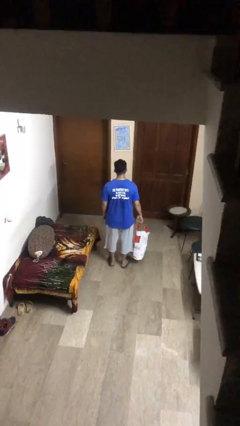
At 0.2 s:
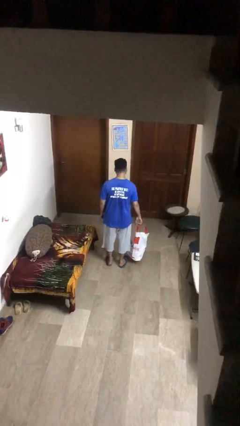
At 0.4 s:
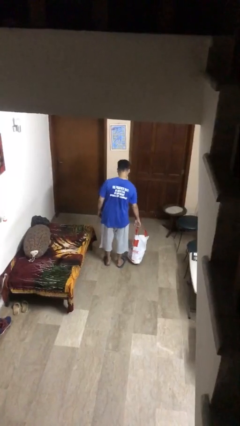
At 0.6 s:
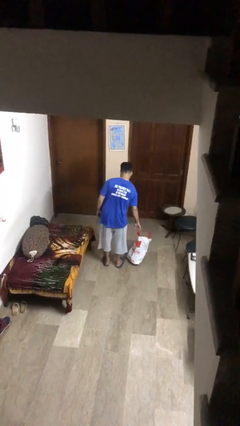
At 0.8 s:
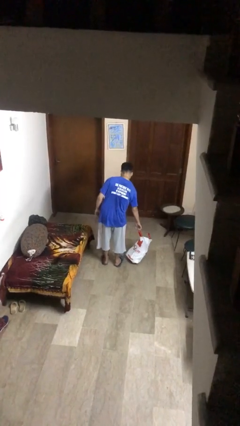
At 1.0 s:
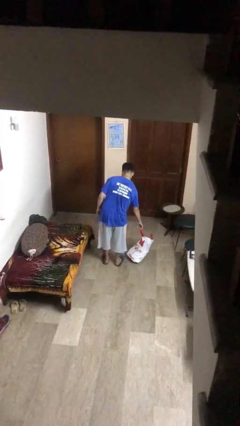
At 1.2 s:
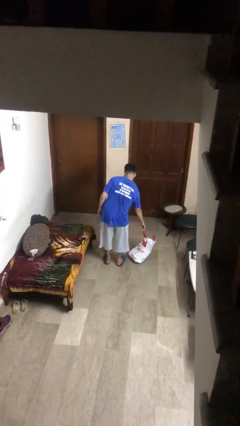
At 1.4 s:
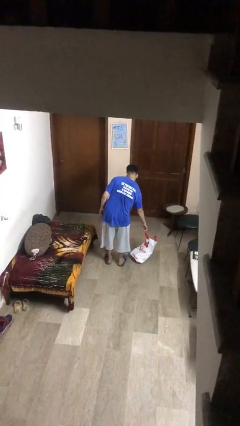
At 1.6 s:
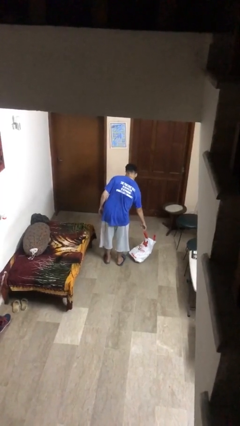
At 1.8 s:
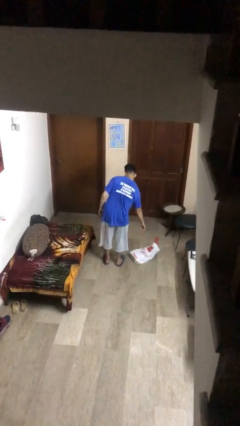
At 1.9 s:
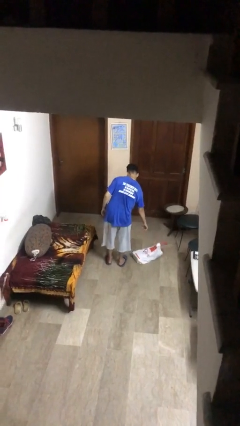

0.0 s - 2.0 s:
person puts down object on floor

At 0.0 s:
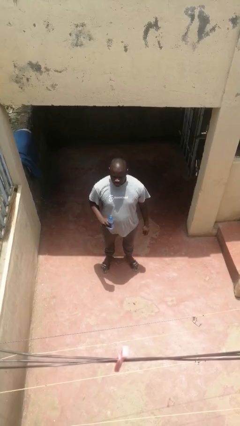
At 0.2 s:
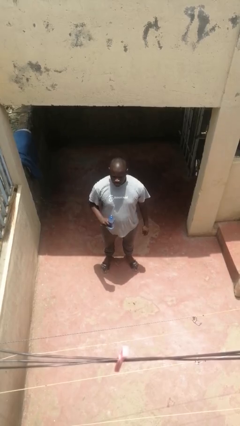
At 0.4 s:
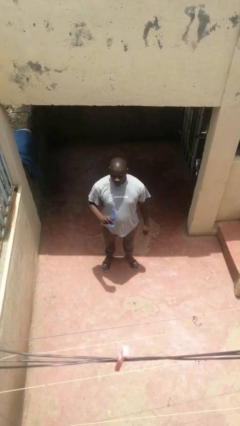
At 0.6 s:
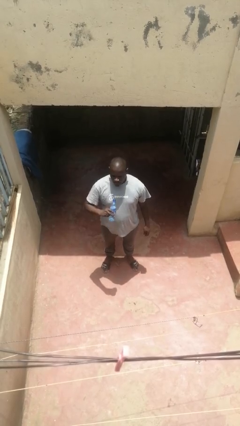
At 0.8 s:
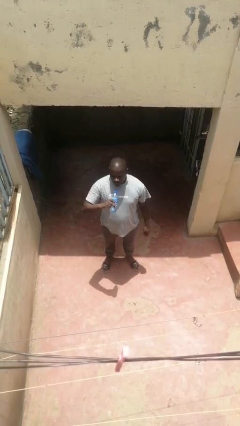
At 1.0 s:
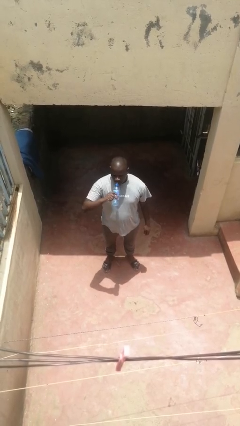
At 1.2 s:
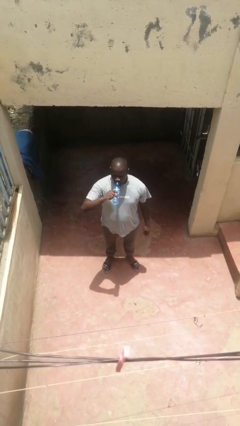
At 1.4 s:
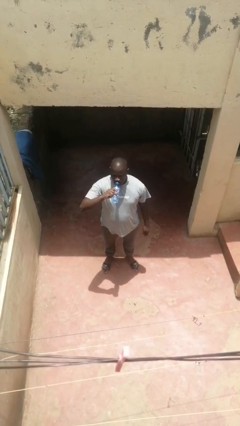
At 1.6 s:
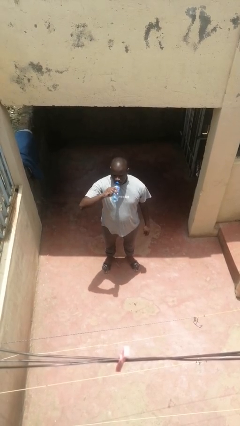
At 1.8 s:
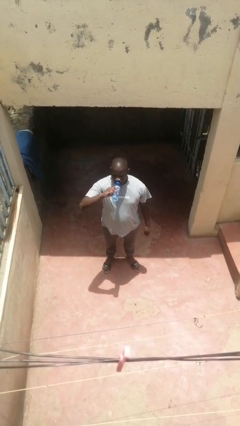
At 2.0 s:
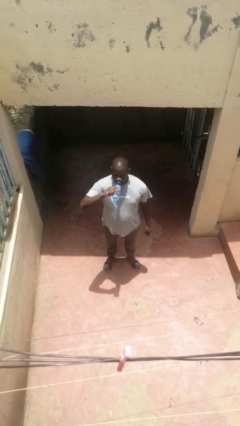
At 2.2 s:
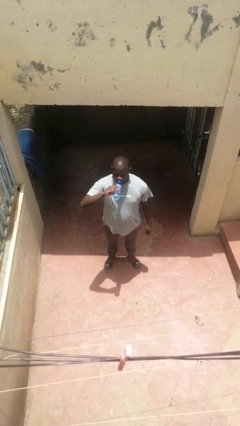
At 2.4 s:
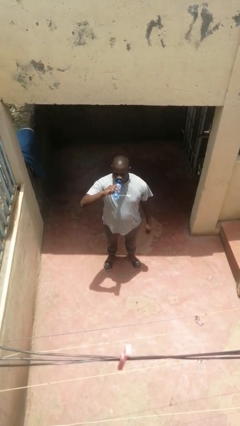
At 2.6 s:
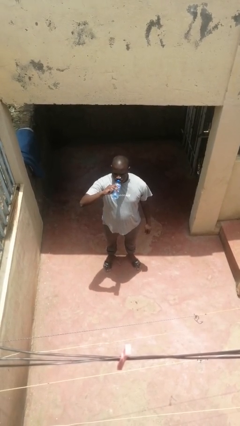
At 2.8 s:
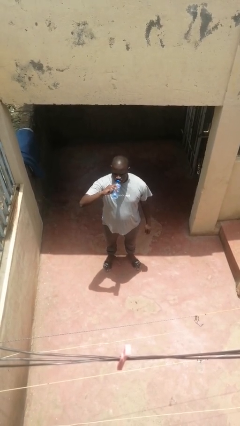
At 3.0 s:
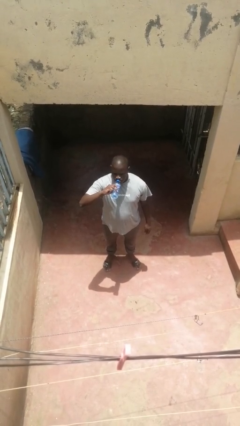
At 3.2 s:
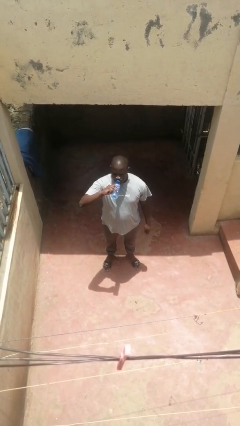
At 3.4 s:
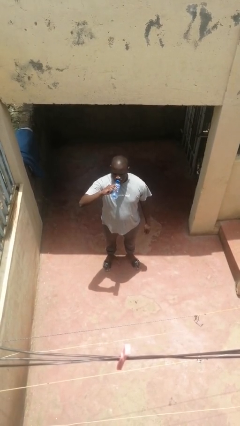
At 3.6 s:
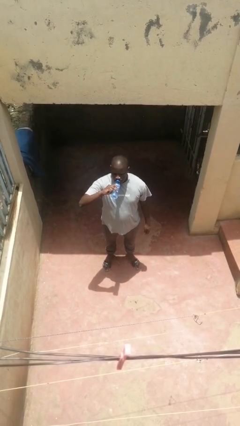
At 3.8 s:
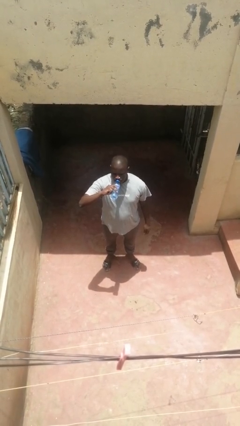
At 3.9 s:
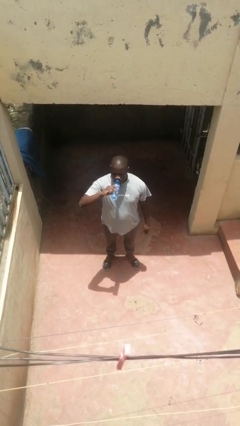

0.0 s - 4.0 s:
person drinks from bottle

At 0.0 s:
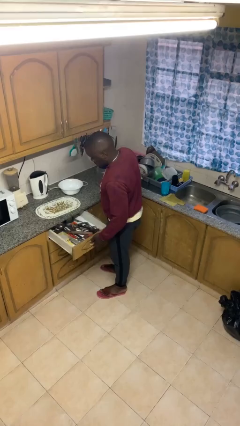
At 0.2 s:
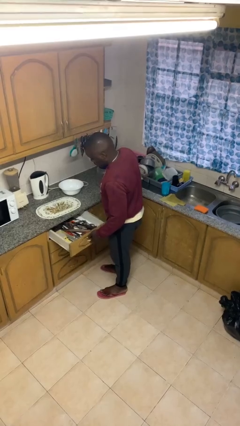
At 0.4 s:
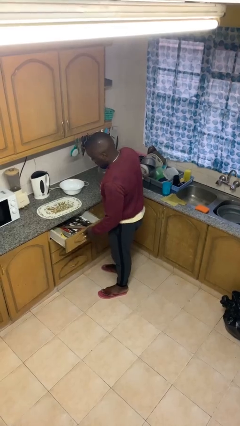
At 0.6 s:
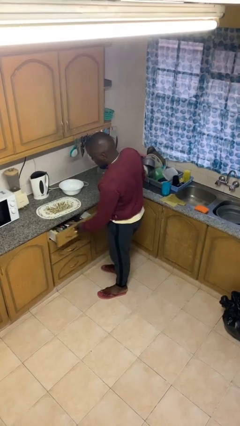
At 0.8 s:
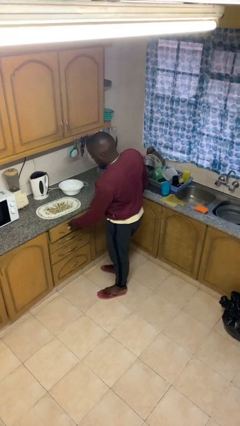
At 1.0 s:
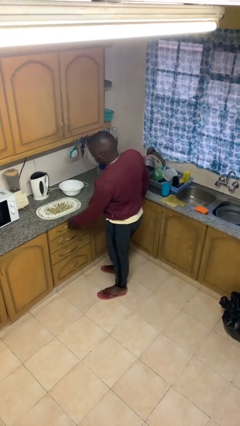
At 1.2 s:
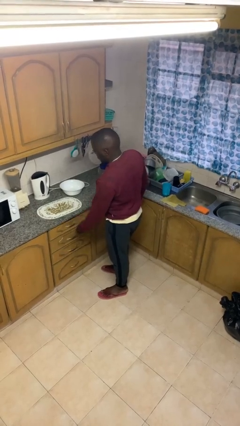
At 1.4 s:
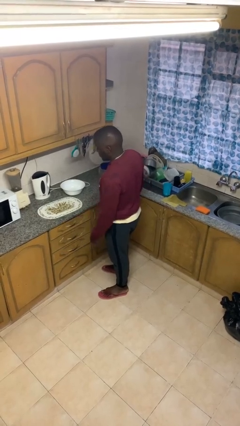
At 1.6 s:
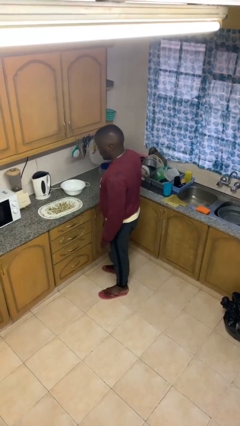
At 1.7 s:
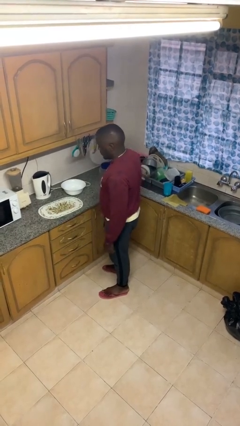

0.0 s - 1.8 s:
person closes kitchen drawer

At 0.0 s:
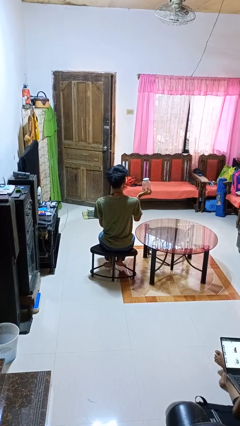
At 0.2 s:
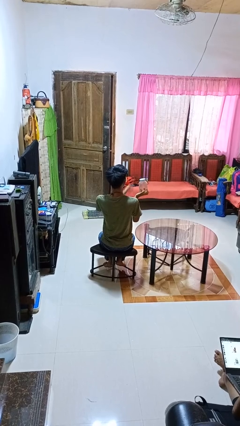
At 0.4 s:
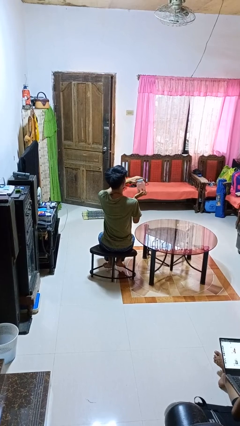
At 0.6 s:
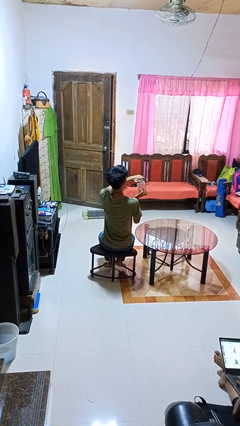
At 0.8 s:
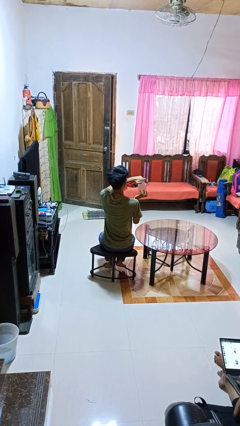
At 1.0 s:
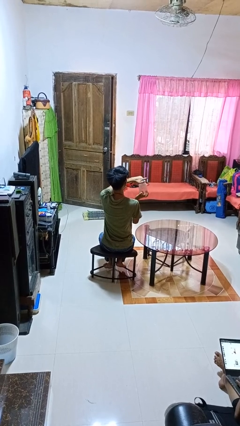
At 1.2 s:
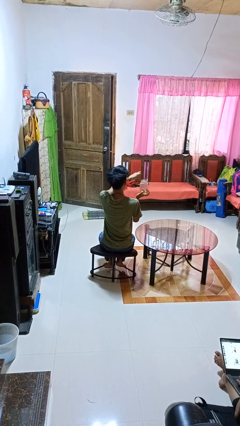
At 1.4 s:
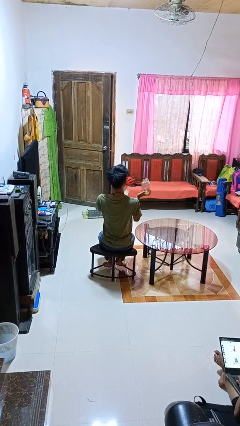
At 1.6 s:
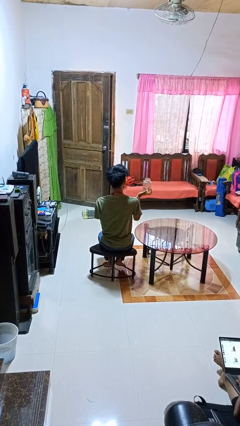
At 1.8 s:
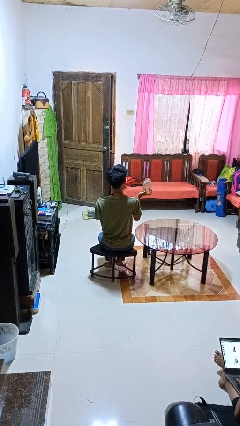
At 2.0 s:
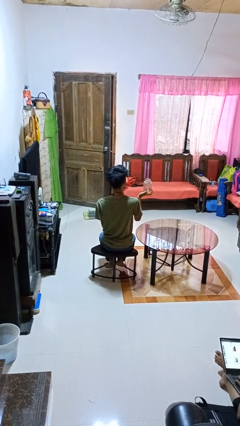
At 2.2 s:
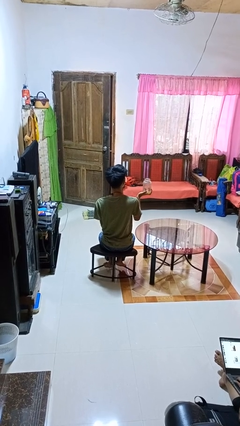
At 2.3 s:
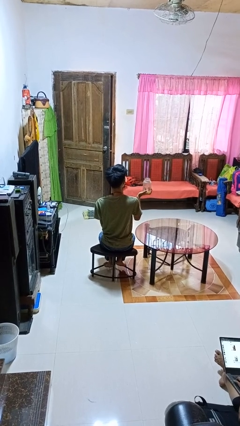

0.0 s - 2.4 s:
person opens jar

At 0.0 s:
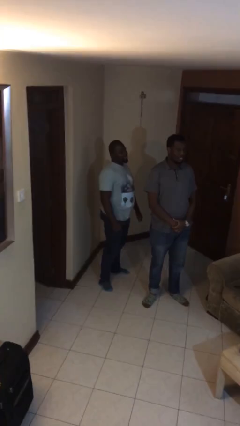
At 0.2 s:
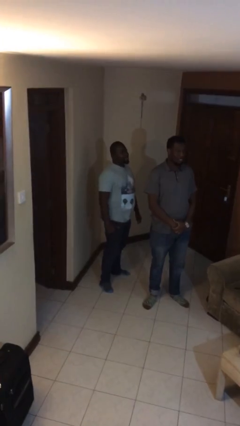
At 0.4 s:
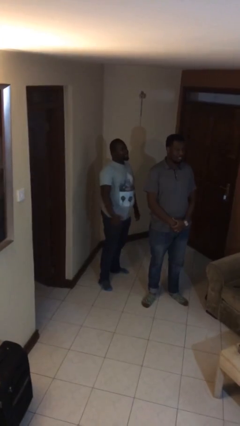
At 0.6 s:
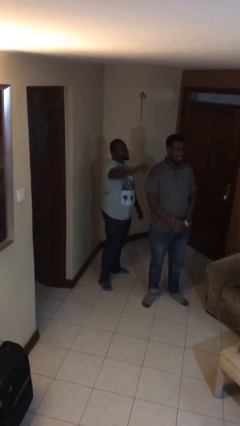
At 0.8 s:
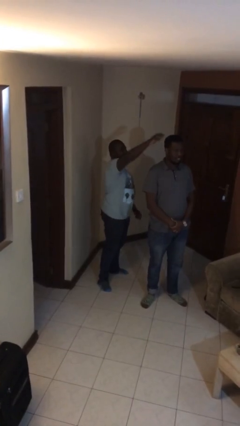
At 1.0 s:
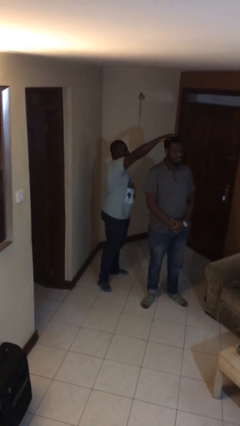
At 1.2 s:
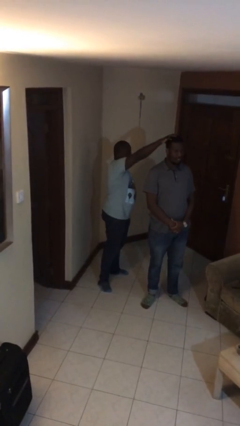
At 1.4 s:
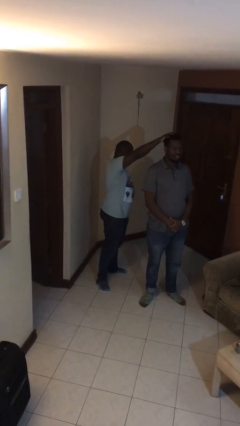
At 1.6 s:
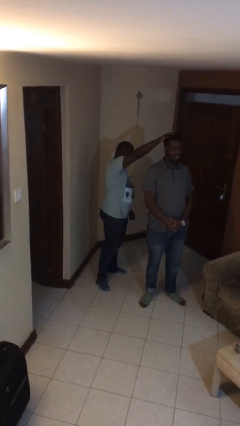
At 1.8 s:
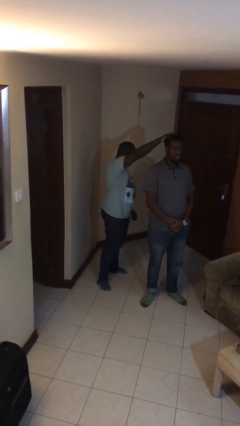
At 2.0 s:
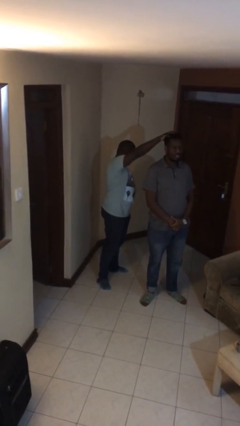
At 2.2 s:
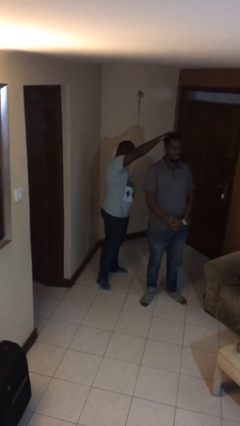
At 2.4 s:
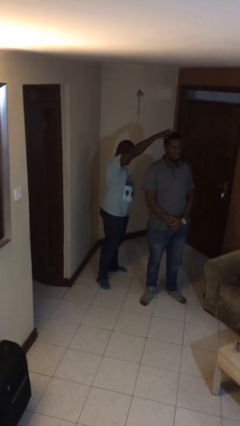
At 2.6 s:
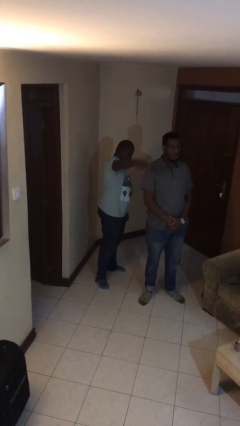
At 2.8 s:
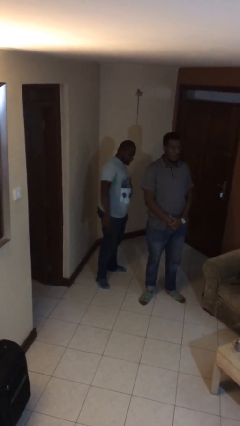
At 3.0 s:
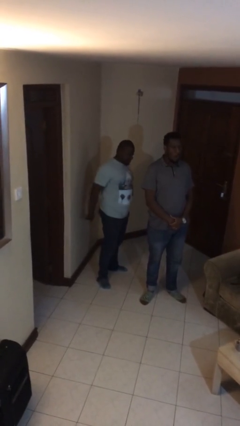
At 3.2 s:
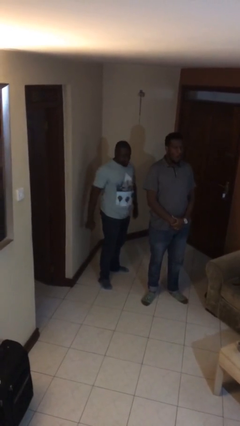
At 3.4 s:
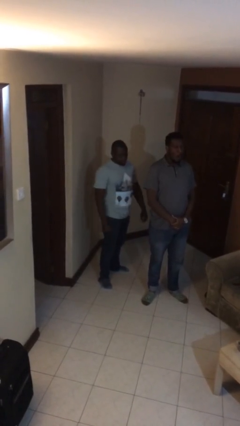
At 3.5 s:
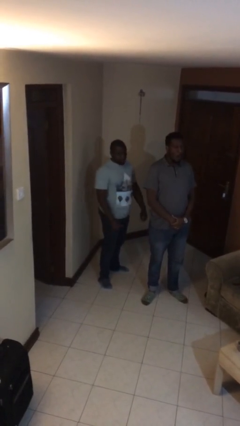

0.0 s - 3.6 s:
person grabs person by hair

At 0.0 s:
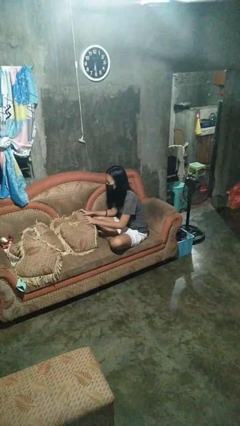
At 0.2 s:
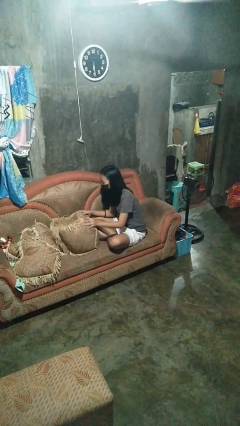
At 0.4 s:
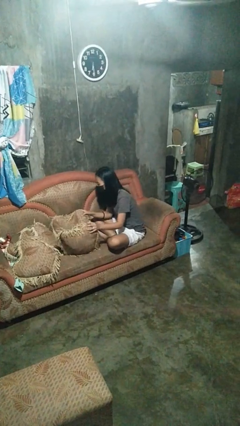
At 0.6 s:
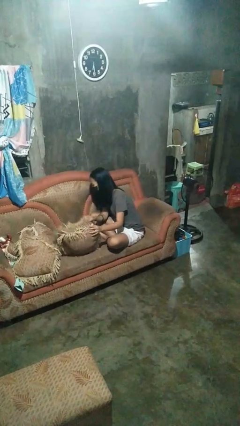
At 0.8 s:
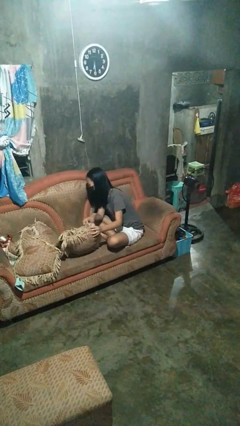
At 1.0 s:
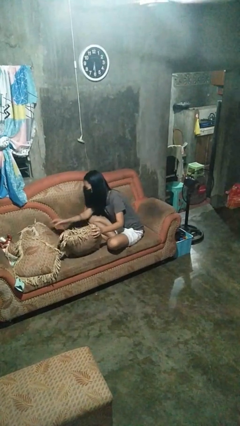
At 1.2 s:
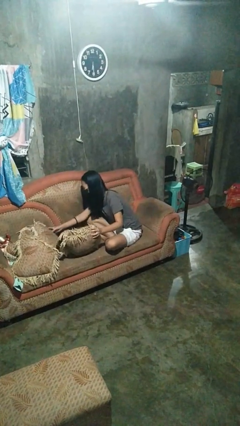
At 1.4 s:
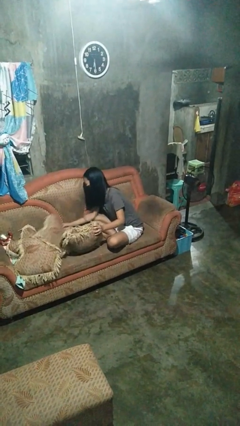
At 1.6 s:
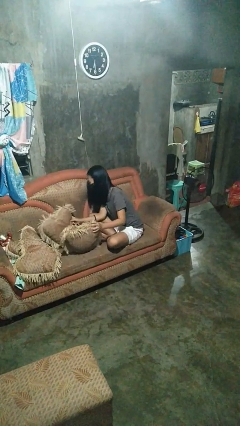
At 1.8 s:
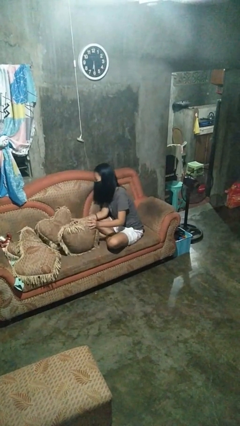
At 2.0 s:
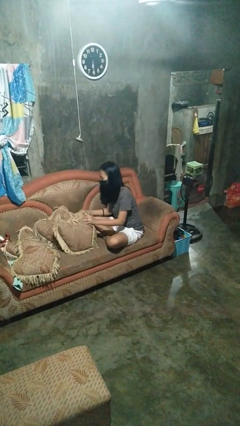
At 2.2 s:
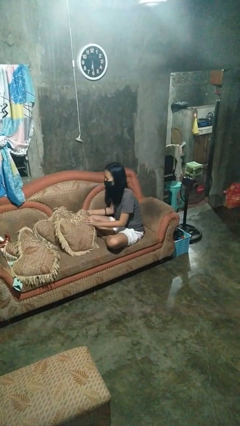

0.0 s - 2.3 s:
person searches in couch

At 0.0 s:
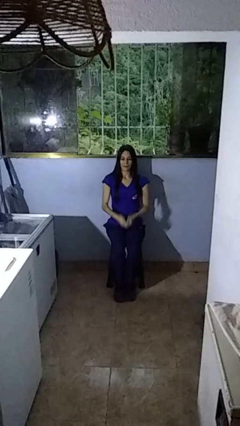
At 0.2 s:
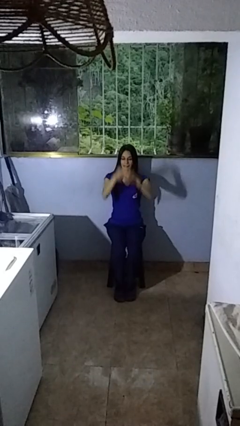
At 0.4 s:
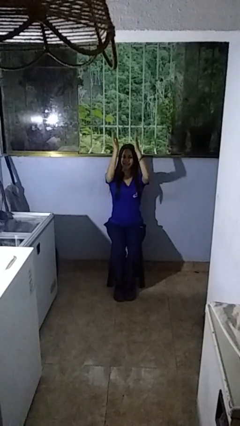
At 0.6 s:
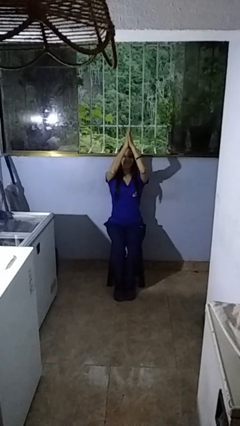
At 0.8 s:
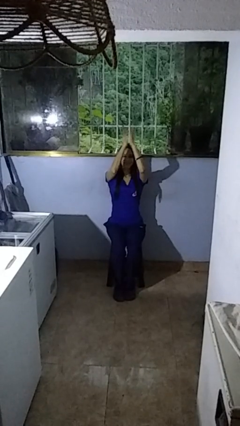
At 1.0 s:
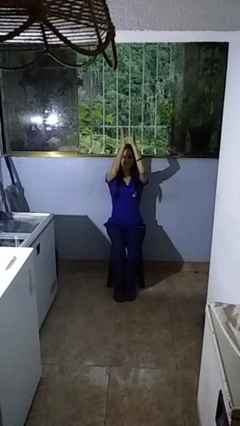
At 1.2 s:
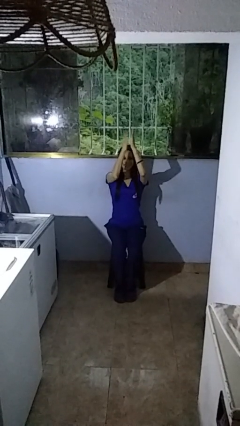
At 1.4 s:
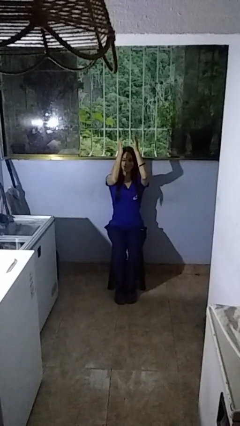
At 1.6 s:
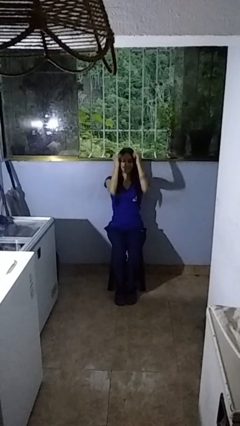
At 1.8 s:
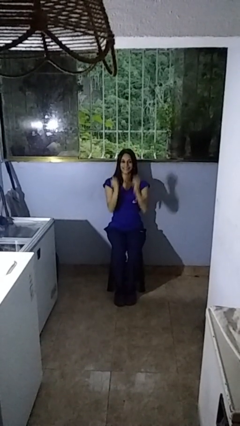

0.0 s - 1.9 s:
person claps hands
